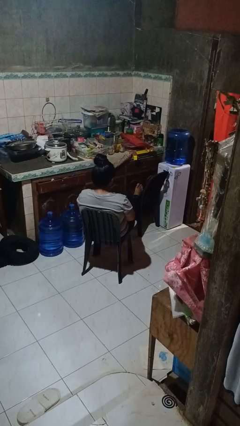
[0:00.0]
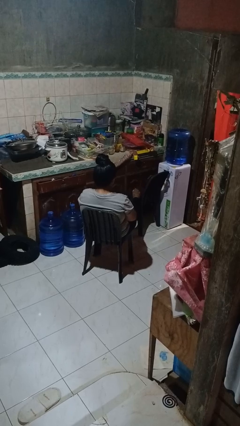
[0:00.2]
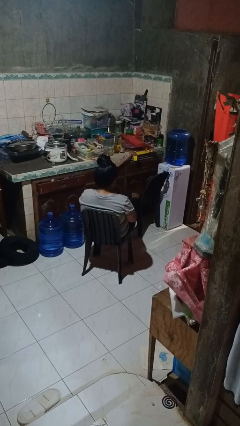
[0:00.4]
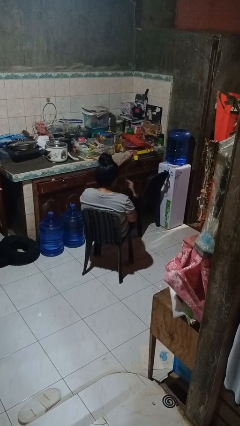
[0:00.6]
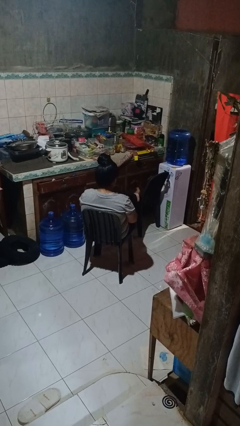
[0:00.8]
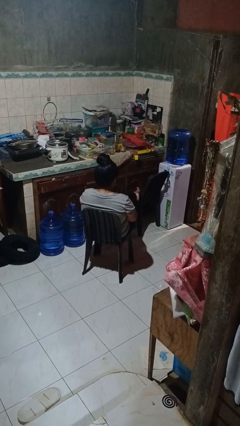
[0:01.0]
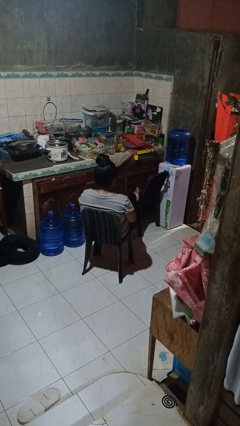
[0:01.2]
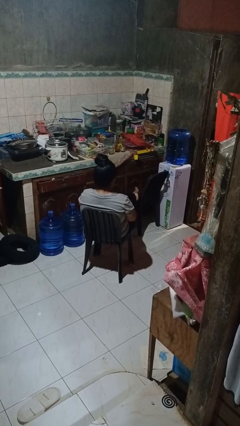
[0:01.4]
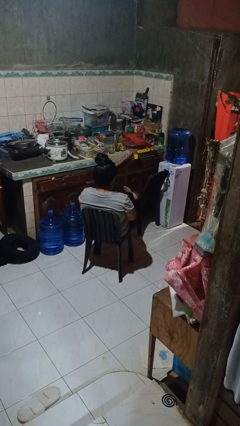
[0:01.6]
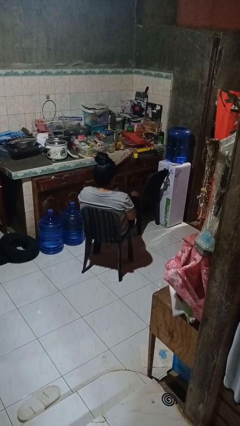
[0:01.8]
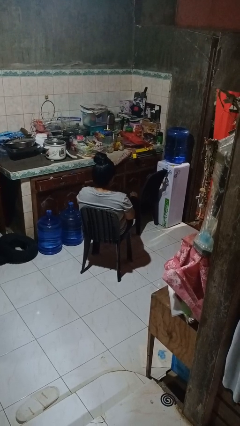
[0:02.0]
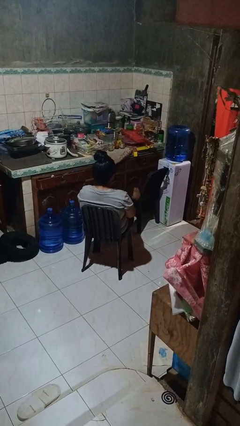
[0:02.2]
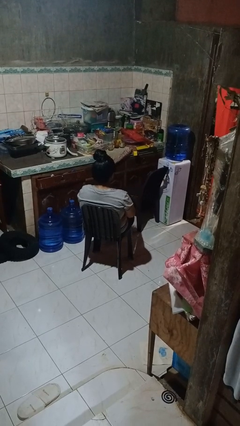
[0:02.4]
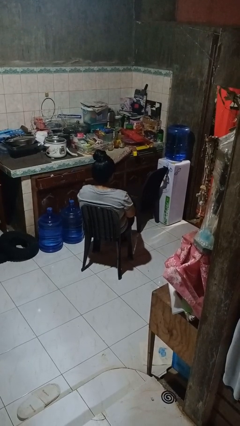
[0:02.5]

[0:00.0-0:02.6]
person puts feet up

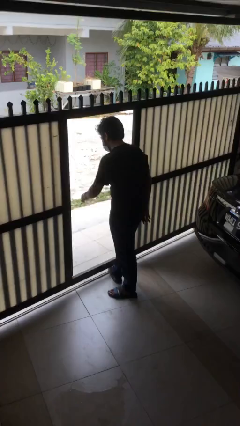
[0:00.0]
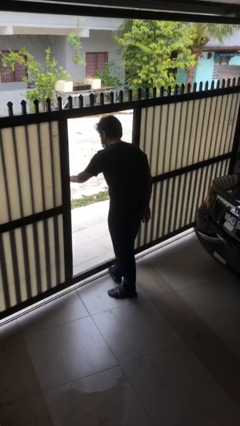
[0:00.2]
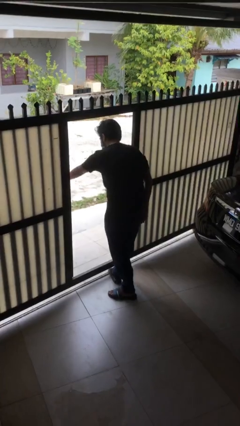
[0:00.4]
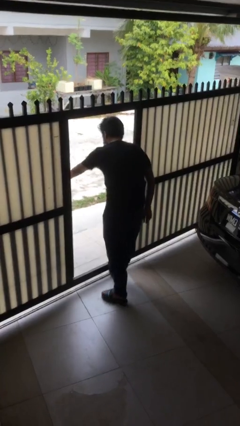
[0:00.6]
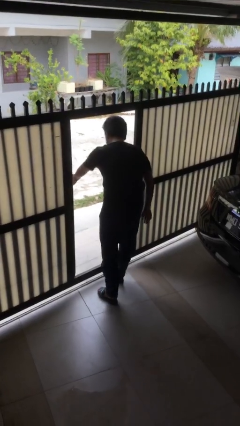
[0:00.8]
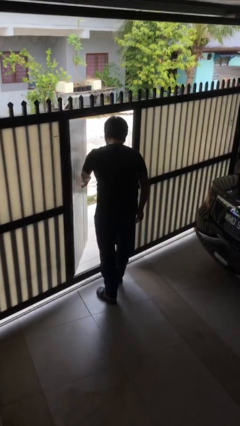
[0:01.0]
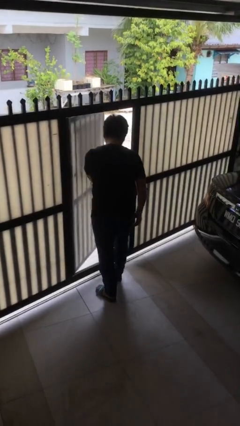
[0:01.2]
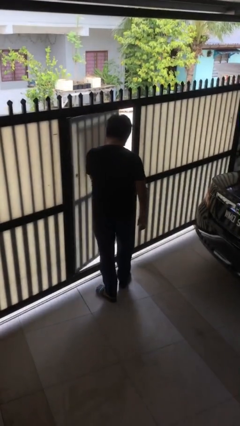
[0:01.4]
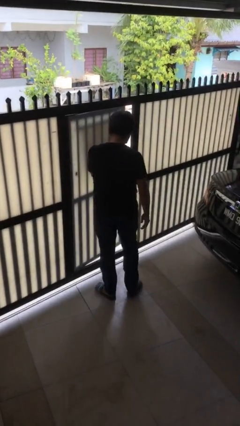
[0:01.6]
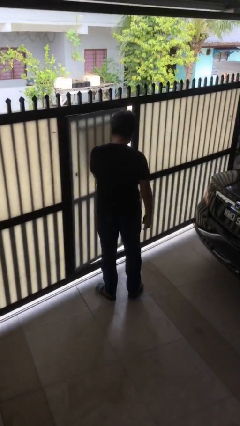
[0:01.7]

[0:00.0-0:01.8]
person closes gate

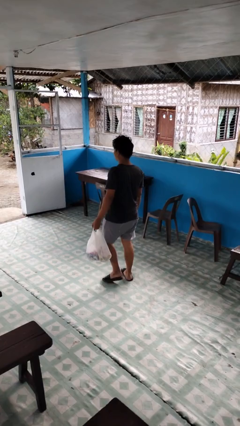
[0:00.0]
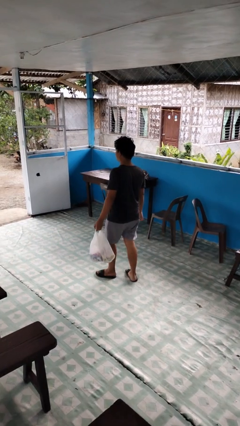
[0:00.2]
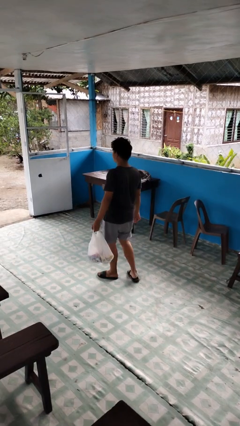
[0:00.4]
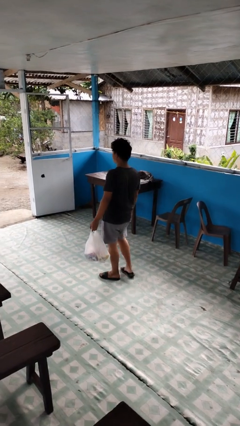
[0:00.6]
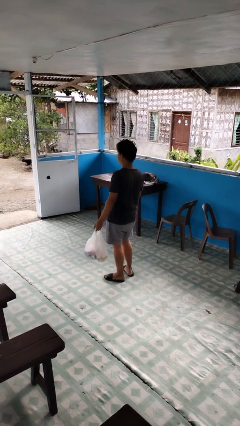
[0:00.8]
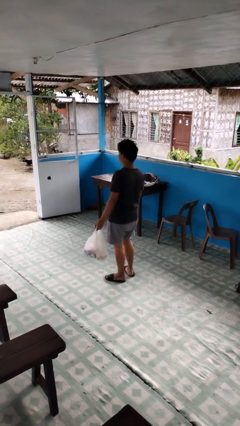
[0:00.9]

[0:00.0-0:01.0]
person carries groceries

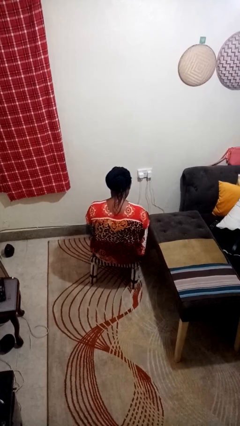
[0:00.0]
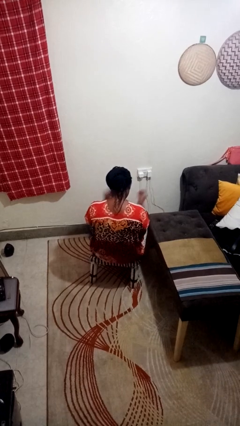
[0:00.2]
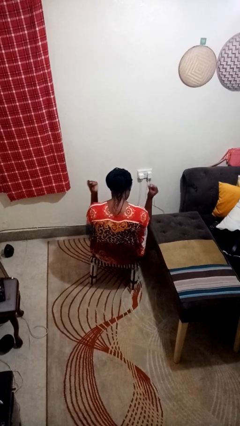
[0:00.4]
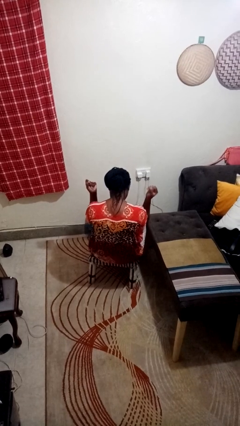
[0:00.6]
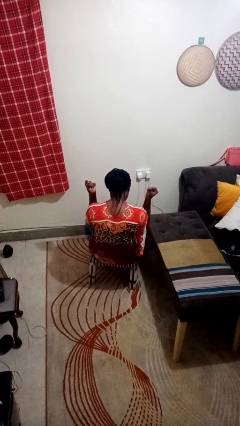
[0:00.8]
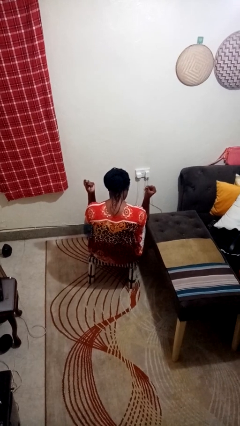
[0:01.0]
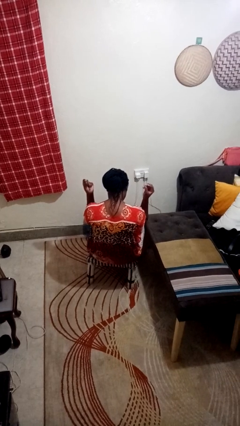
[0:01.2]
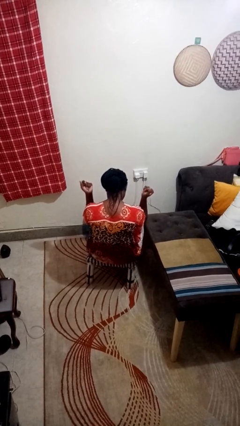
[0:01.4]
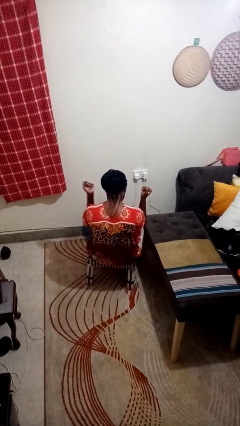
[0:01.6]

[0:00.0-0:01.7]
person snaps fingers

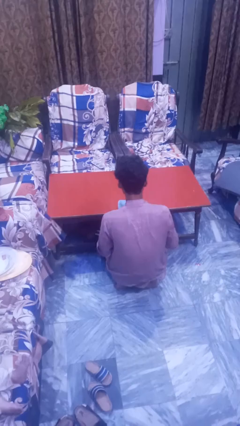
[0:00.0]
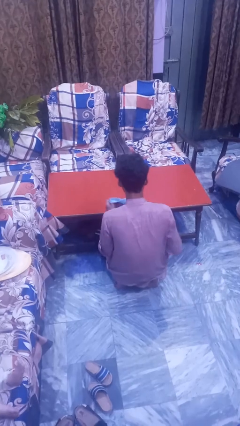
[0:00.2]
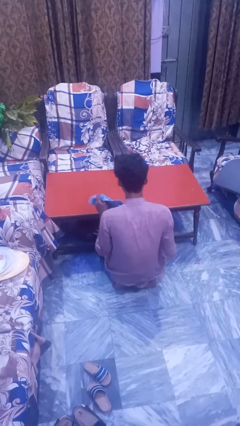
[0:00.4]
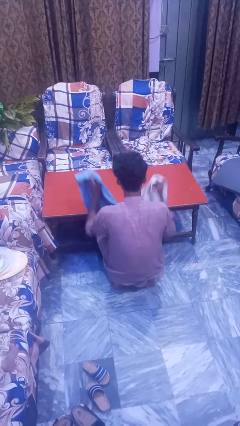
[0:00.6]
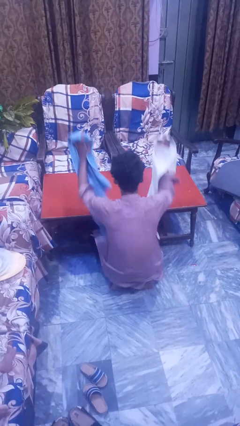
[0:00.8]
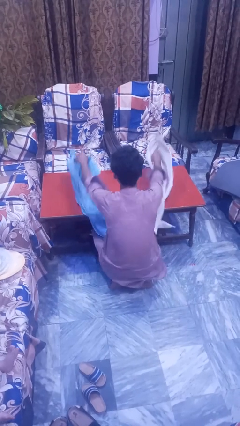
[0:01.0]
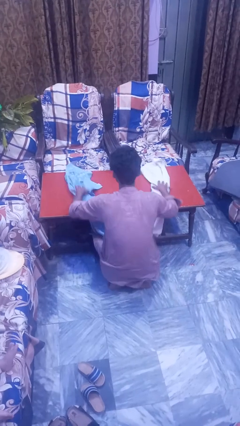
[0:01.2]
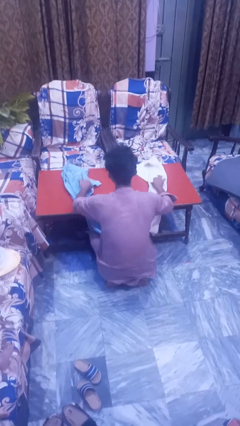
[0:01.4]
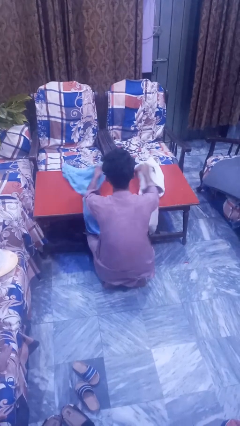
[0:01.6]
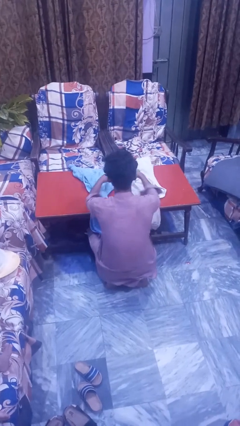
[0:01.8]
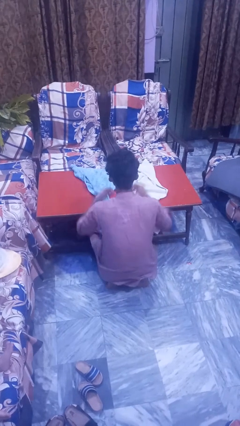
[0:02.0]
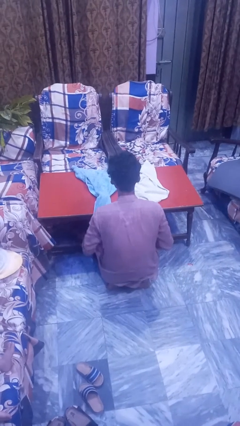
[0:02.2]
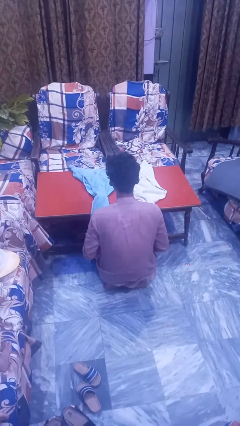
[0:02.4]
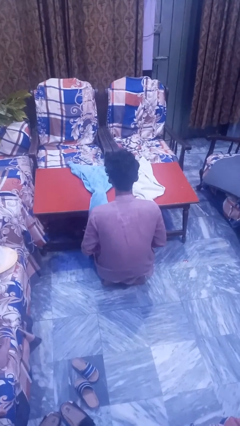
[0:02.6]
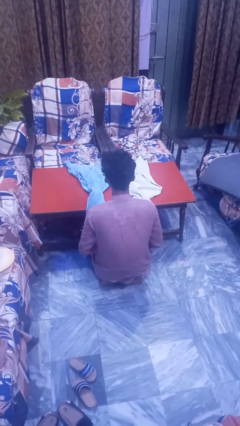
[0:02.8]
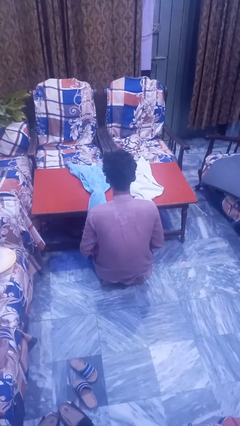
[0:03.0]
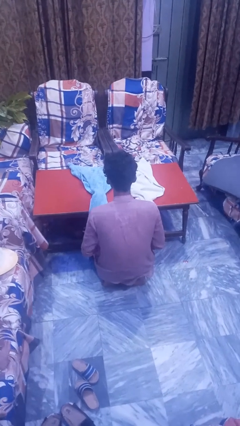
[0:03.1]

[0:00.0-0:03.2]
person spreads tablecloth

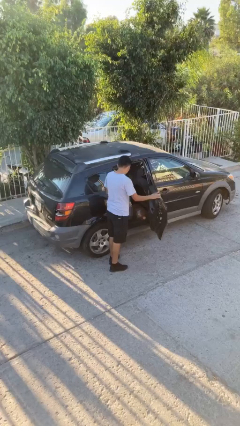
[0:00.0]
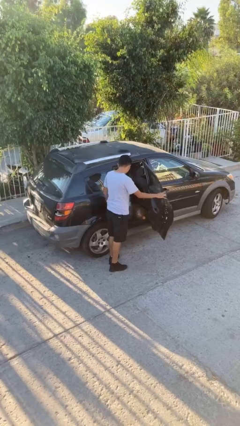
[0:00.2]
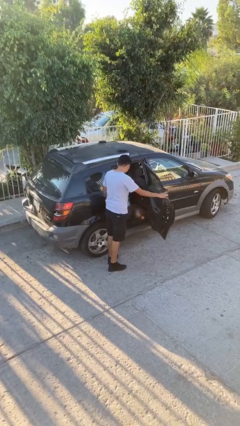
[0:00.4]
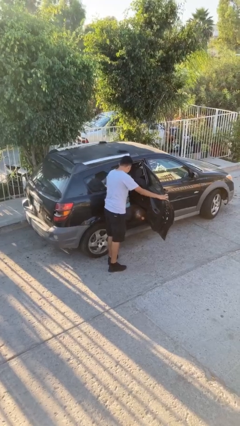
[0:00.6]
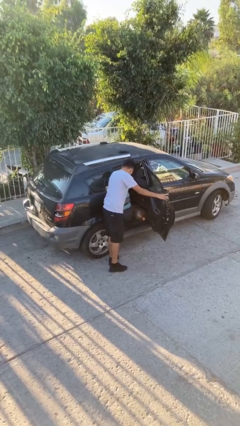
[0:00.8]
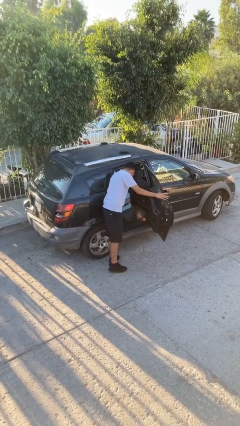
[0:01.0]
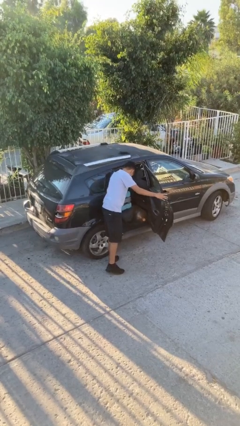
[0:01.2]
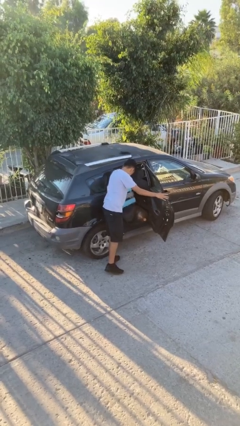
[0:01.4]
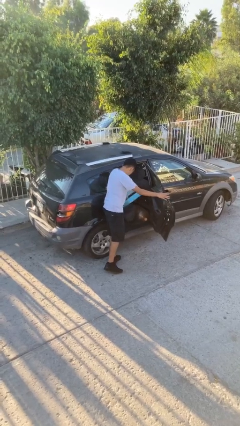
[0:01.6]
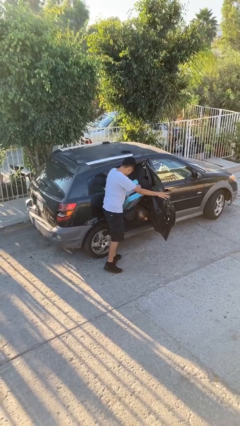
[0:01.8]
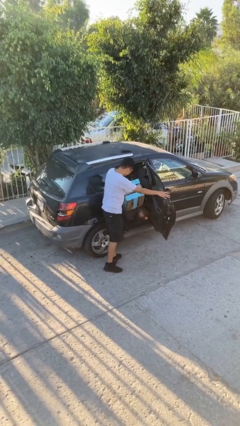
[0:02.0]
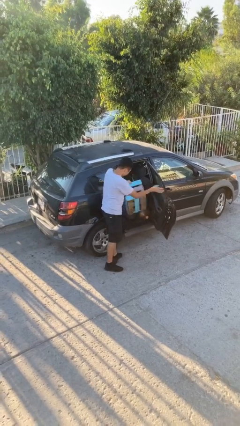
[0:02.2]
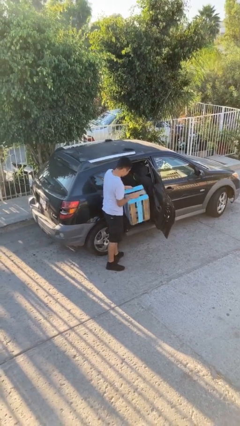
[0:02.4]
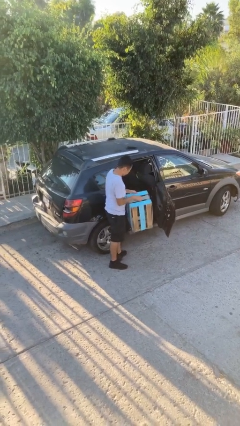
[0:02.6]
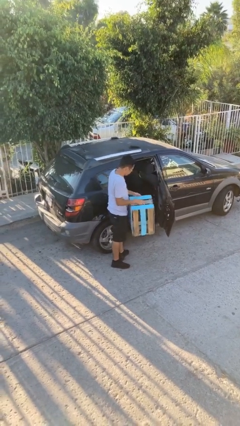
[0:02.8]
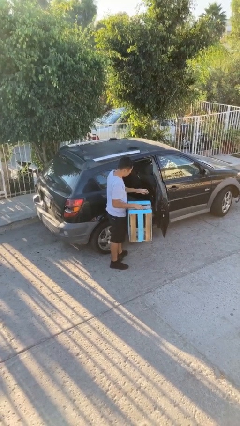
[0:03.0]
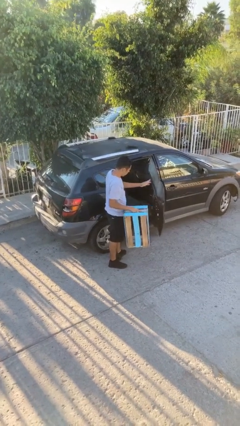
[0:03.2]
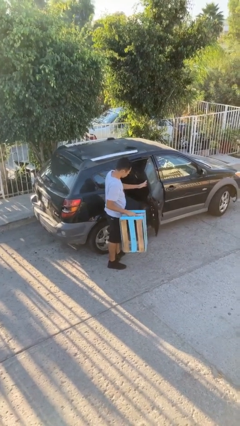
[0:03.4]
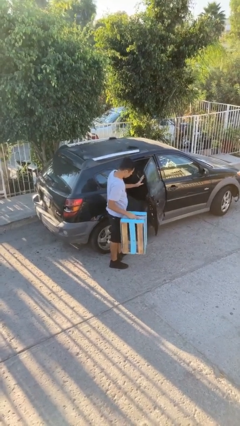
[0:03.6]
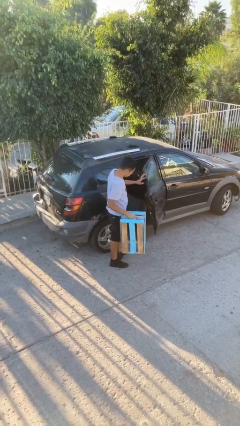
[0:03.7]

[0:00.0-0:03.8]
person unloads car

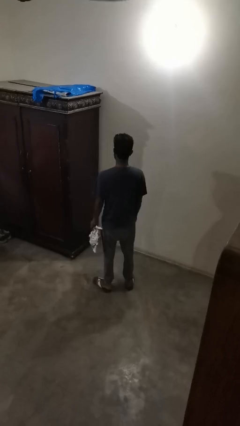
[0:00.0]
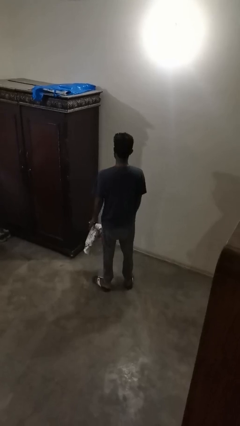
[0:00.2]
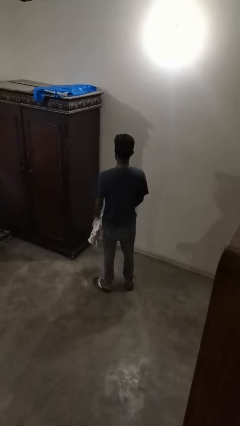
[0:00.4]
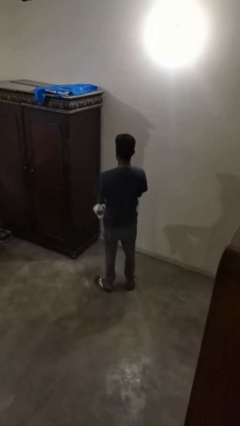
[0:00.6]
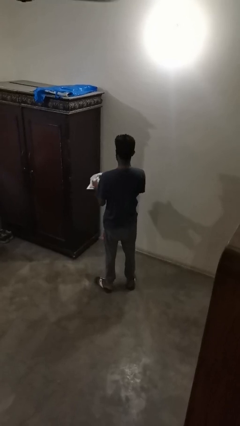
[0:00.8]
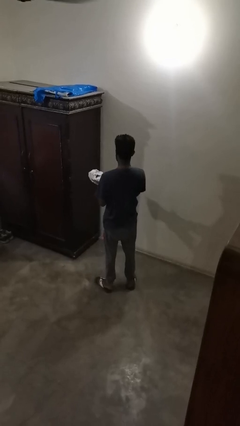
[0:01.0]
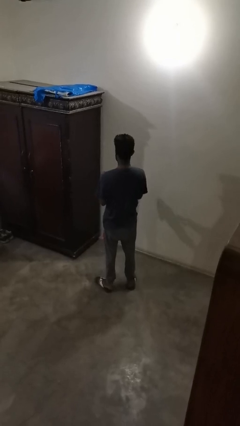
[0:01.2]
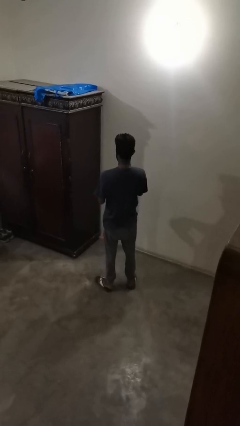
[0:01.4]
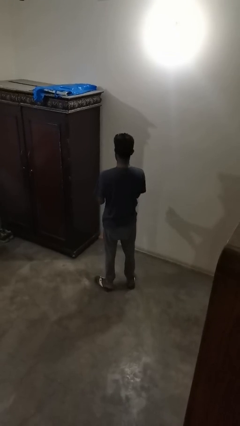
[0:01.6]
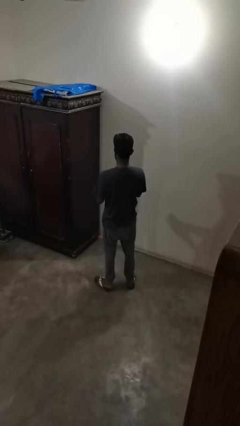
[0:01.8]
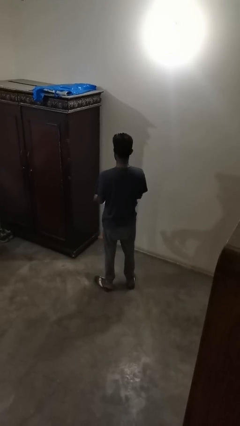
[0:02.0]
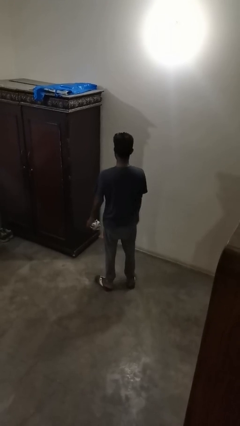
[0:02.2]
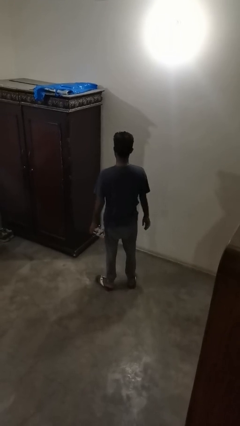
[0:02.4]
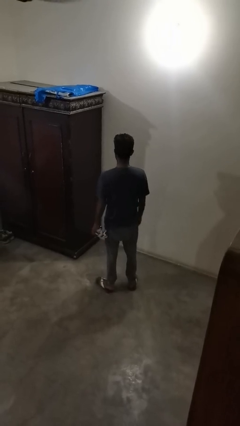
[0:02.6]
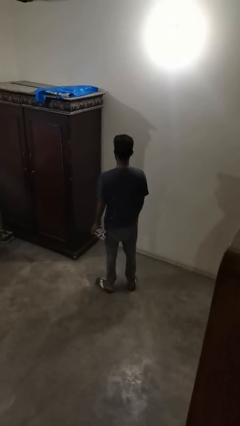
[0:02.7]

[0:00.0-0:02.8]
person crumples paper

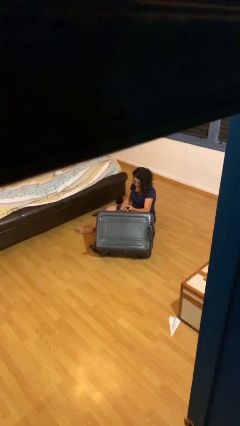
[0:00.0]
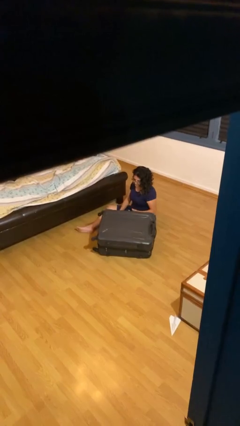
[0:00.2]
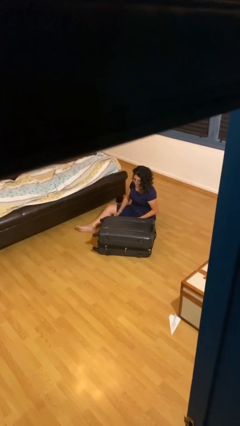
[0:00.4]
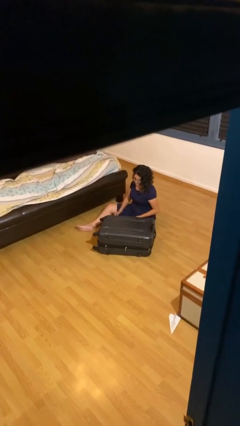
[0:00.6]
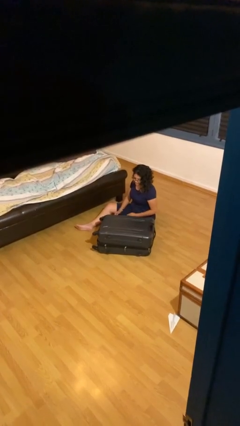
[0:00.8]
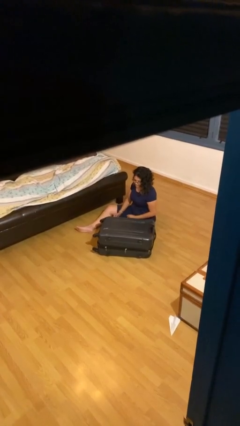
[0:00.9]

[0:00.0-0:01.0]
person closes suitcase
